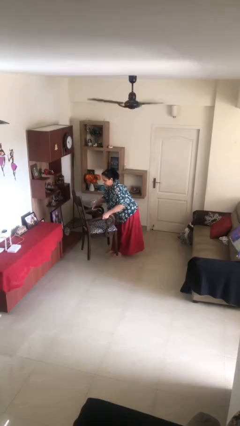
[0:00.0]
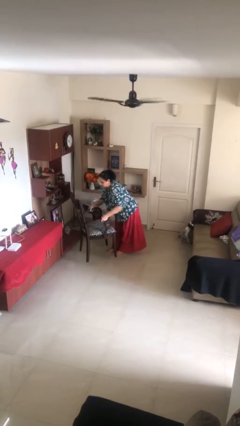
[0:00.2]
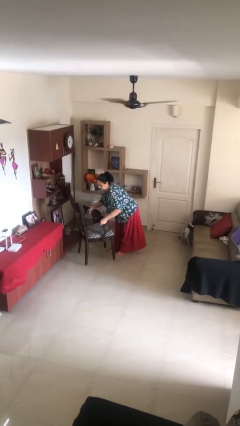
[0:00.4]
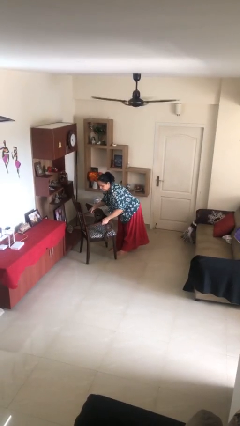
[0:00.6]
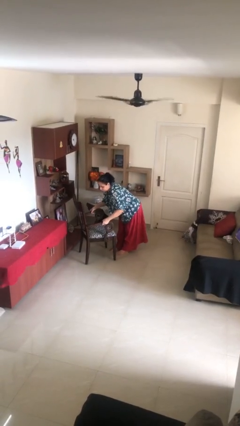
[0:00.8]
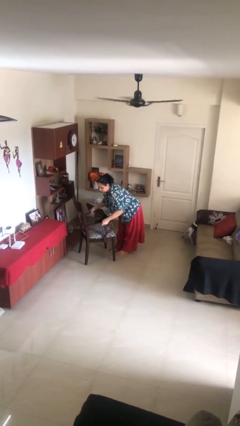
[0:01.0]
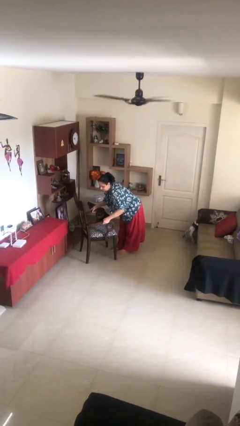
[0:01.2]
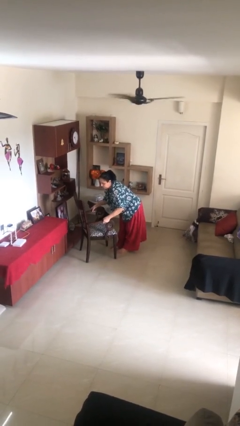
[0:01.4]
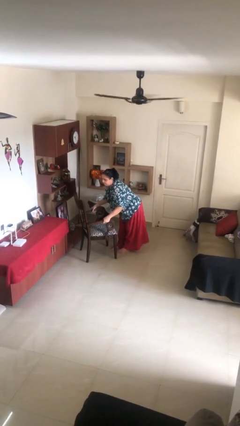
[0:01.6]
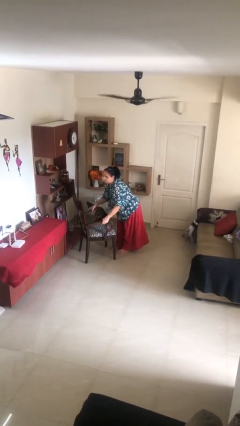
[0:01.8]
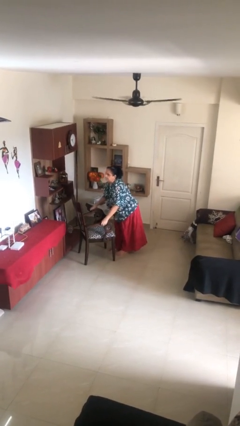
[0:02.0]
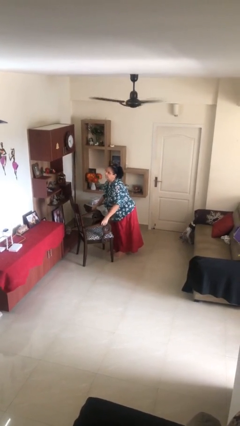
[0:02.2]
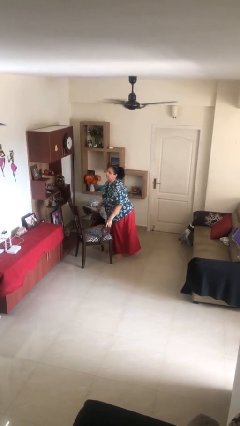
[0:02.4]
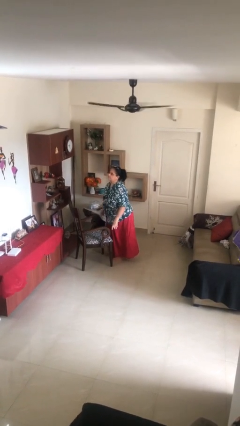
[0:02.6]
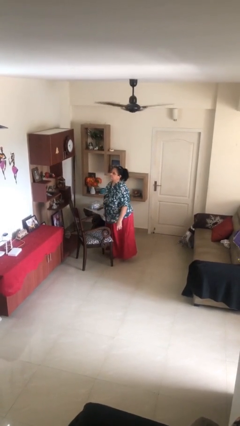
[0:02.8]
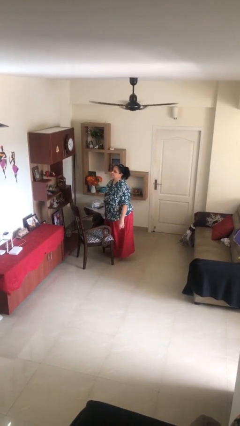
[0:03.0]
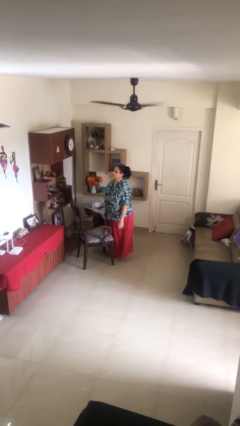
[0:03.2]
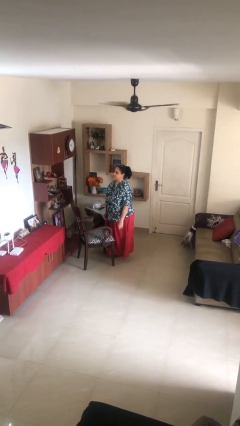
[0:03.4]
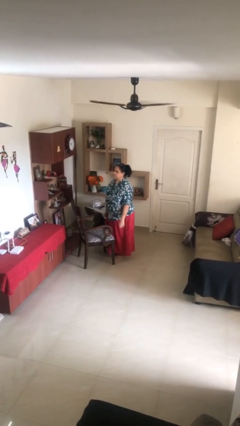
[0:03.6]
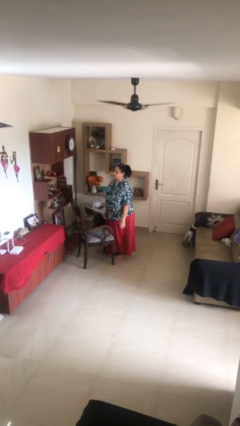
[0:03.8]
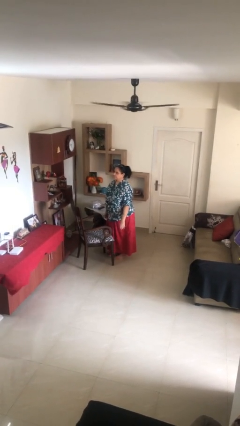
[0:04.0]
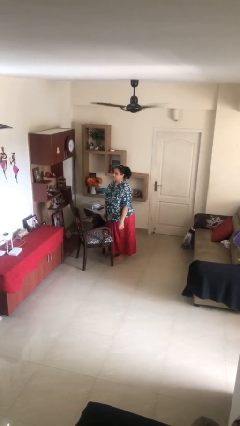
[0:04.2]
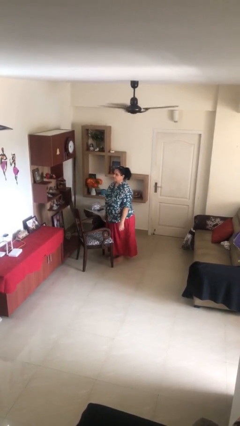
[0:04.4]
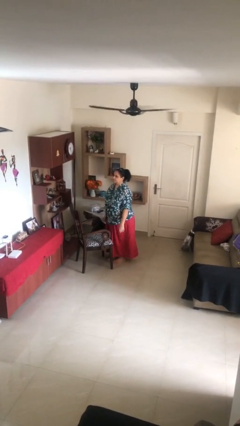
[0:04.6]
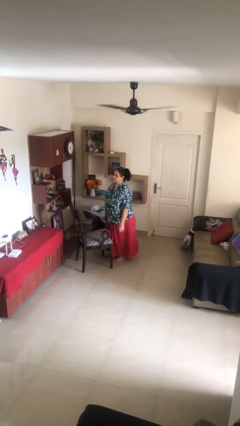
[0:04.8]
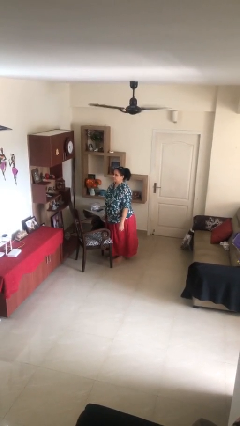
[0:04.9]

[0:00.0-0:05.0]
person puts down object on floor

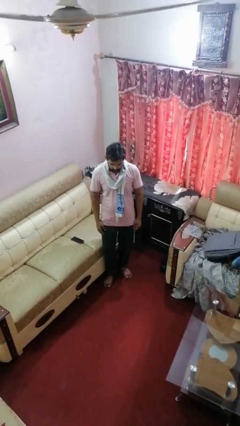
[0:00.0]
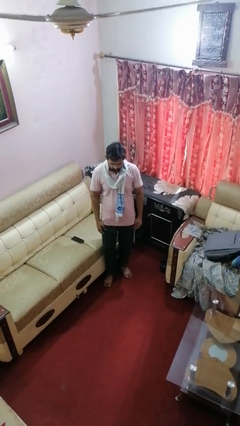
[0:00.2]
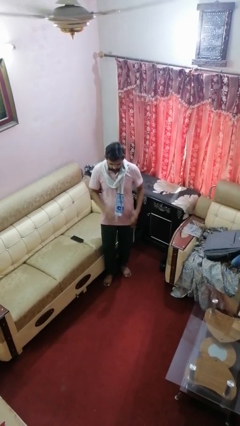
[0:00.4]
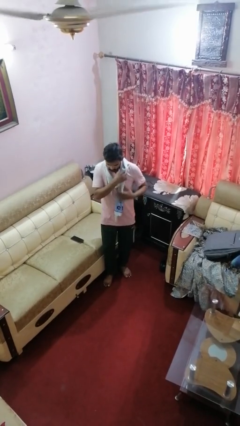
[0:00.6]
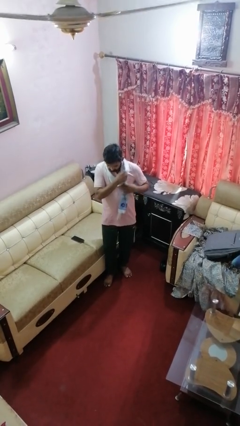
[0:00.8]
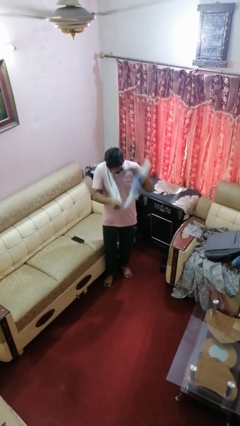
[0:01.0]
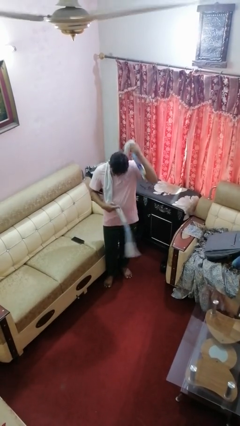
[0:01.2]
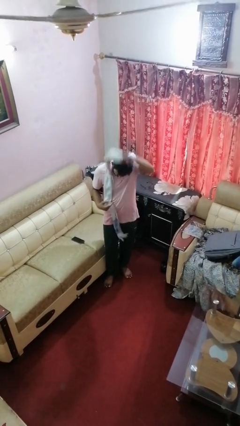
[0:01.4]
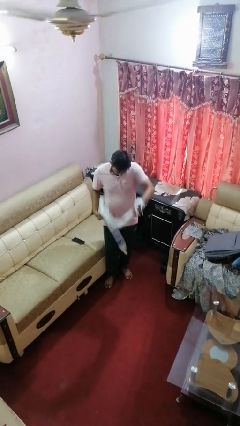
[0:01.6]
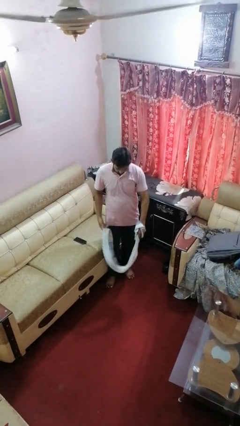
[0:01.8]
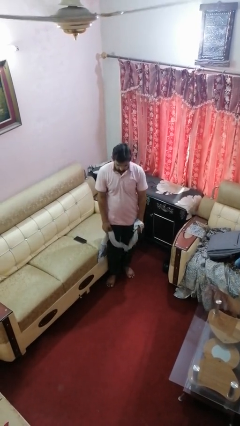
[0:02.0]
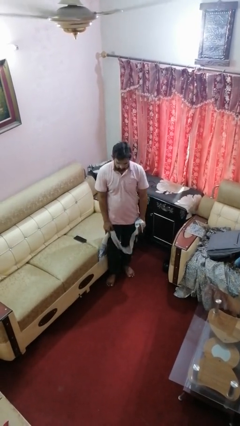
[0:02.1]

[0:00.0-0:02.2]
person takes off scarf

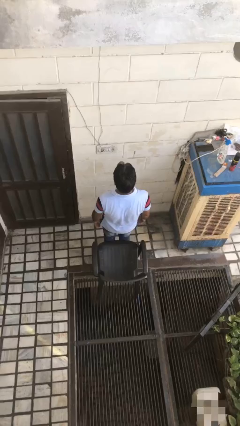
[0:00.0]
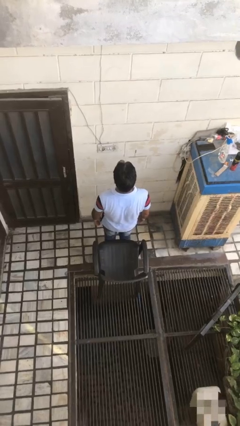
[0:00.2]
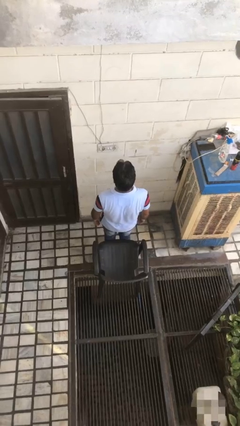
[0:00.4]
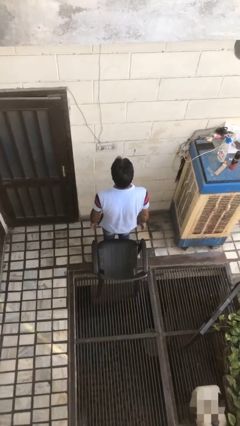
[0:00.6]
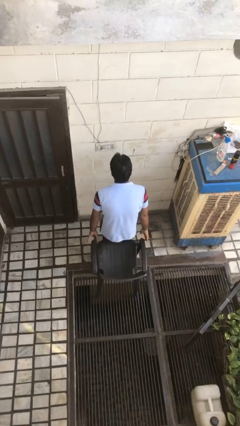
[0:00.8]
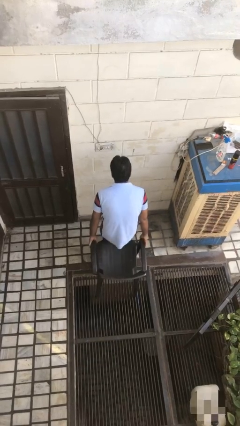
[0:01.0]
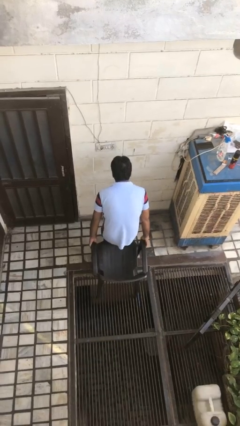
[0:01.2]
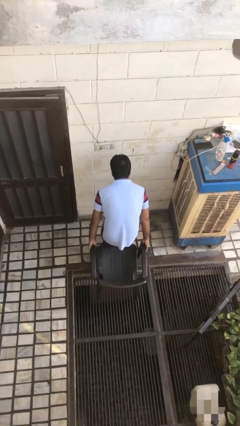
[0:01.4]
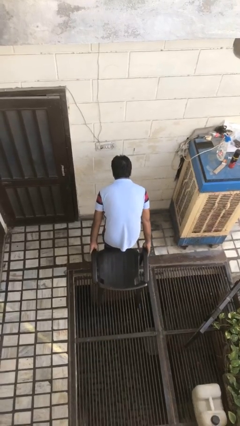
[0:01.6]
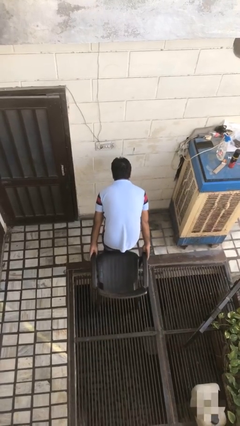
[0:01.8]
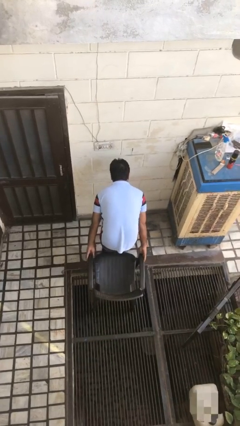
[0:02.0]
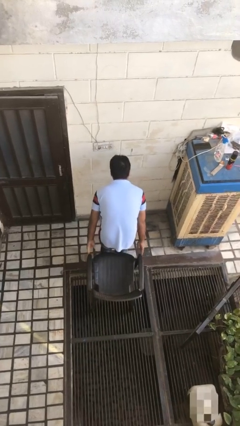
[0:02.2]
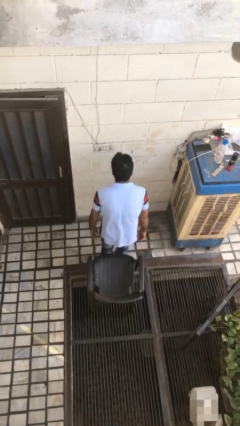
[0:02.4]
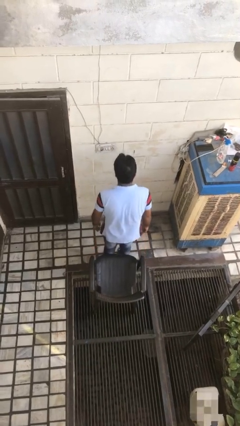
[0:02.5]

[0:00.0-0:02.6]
person pushes in chair

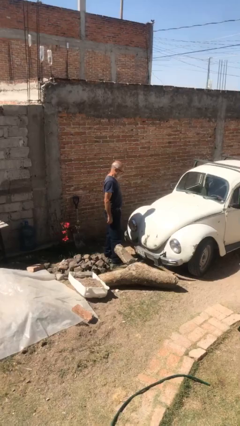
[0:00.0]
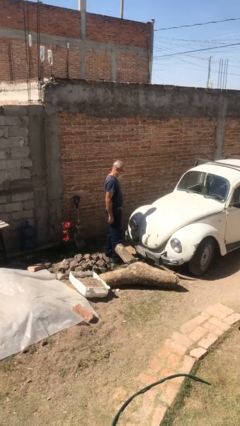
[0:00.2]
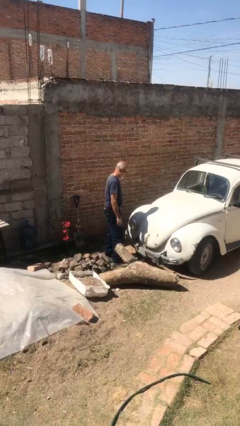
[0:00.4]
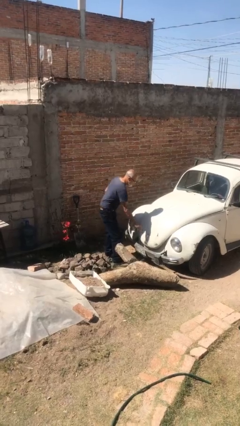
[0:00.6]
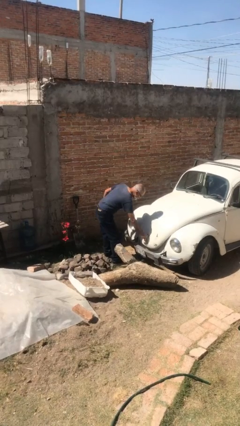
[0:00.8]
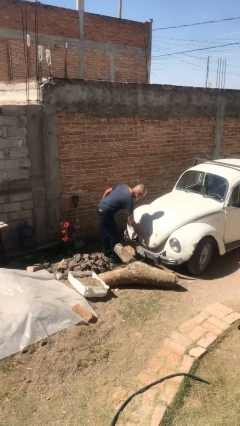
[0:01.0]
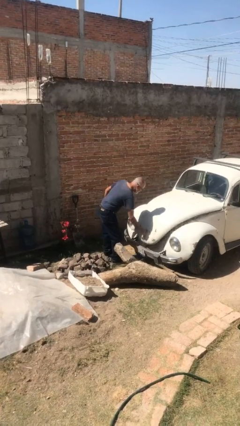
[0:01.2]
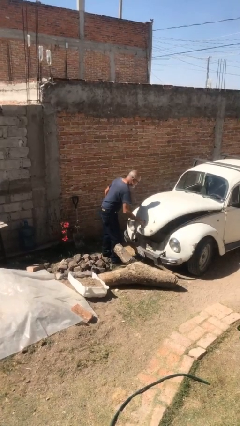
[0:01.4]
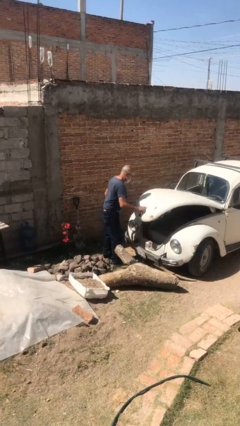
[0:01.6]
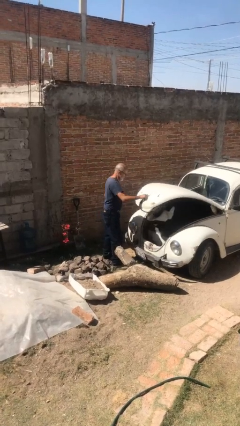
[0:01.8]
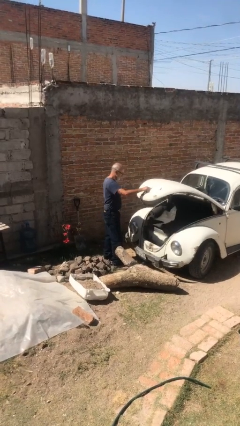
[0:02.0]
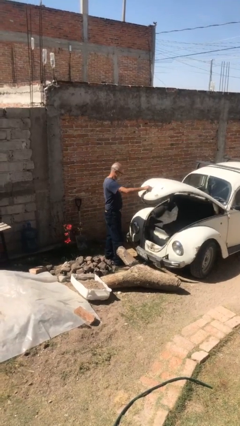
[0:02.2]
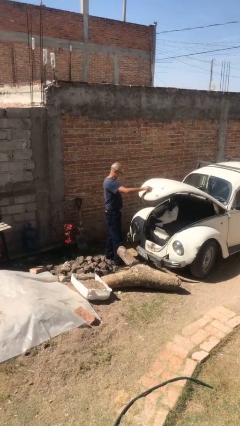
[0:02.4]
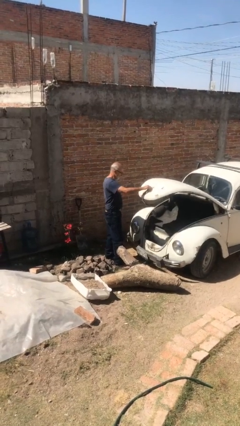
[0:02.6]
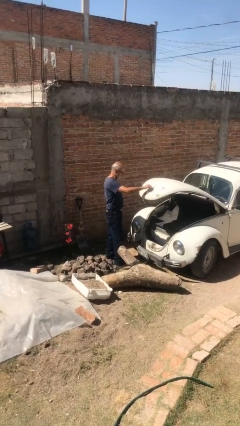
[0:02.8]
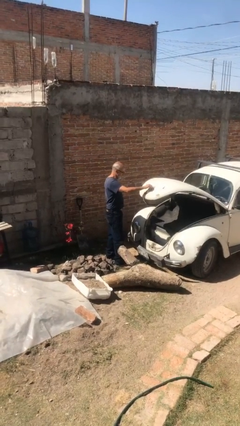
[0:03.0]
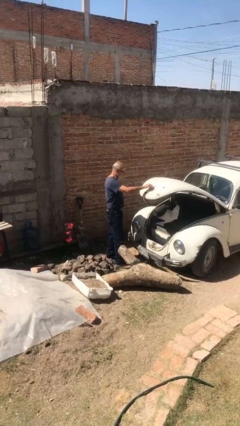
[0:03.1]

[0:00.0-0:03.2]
person opens car trunk

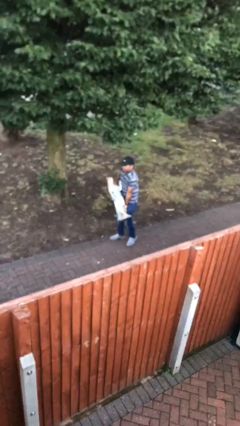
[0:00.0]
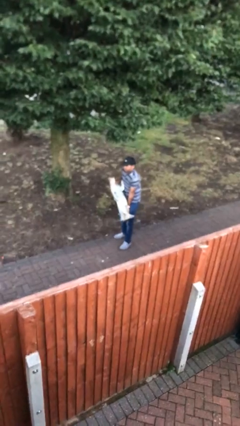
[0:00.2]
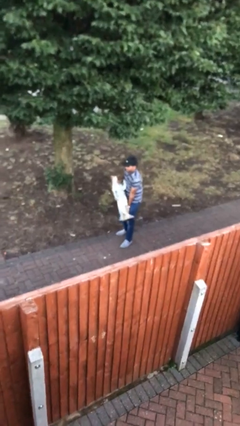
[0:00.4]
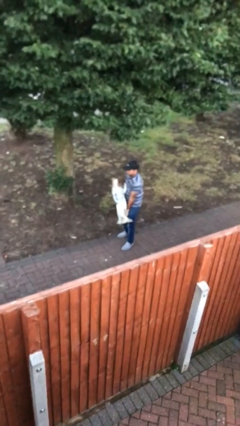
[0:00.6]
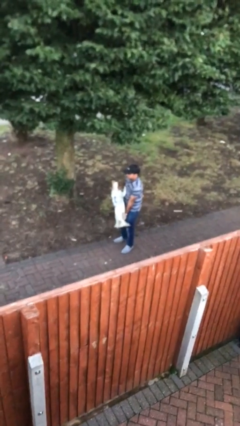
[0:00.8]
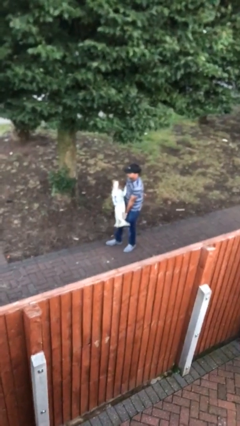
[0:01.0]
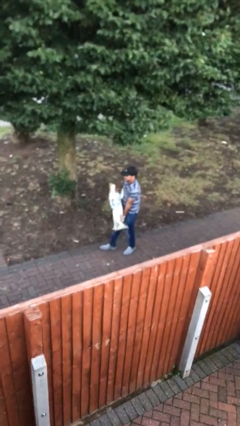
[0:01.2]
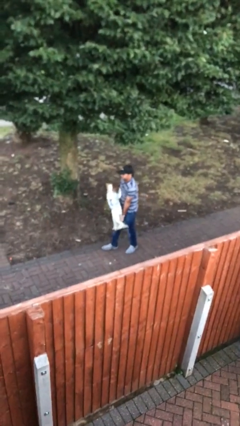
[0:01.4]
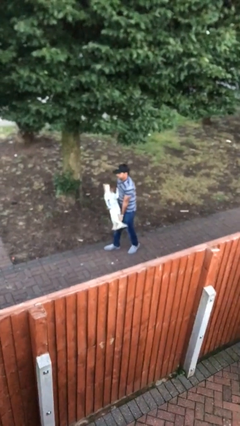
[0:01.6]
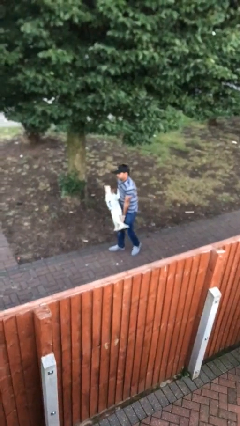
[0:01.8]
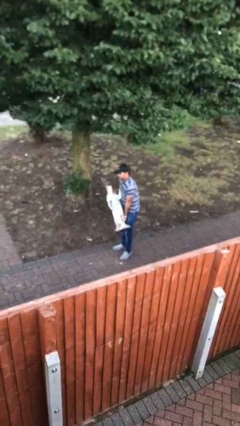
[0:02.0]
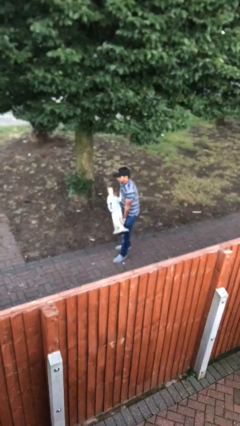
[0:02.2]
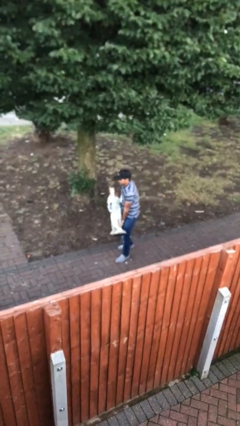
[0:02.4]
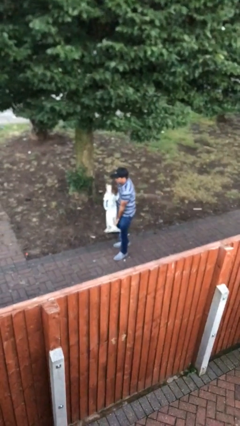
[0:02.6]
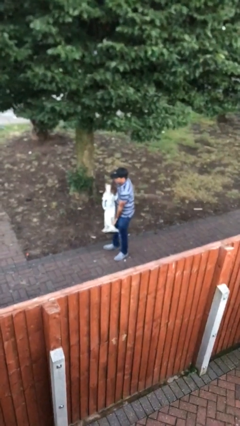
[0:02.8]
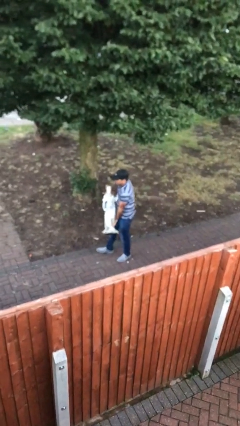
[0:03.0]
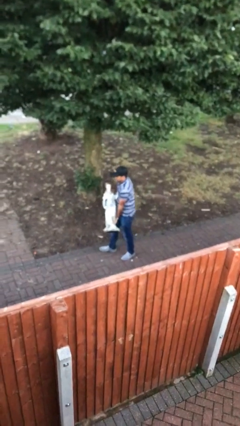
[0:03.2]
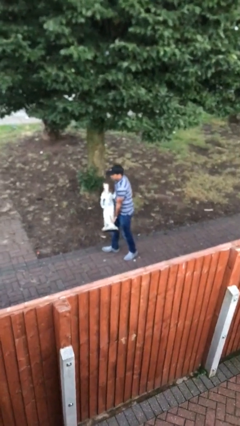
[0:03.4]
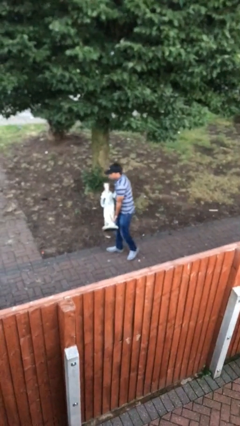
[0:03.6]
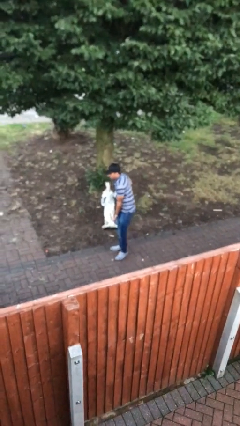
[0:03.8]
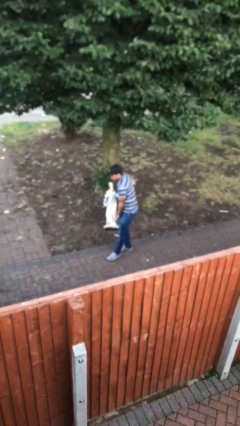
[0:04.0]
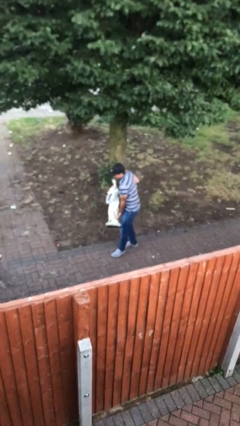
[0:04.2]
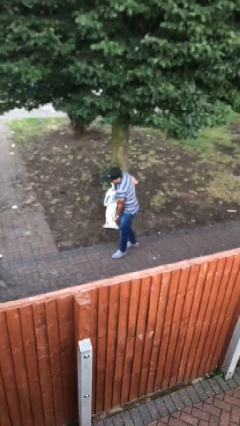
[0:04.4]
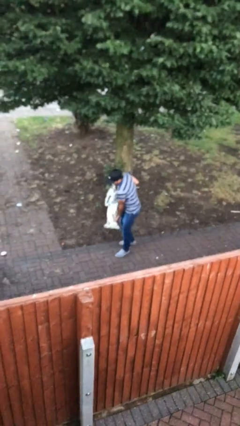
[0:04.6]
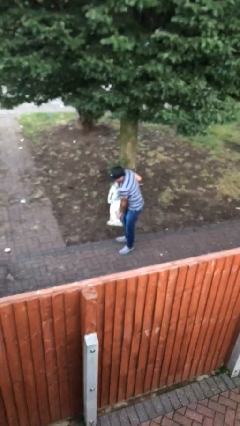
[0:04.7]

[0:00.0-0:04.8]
person carries heavy object
